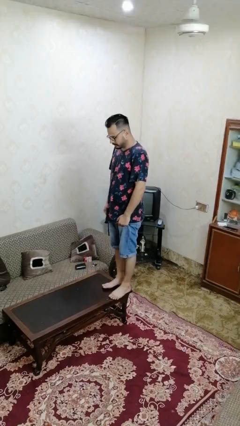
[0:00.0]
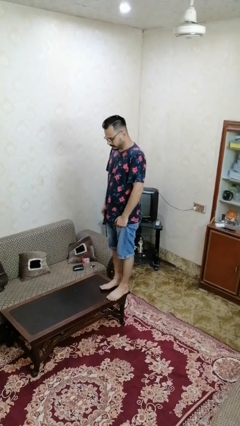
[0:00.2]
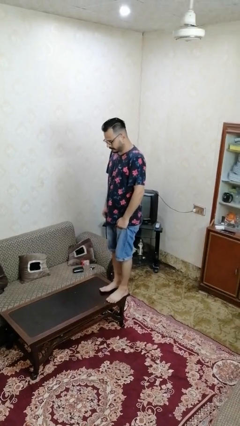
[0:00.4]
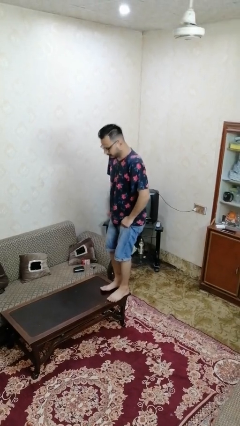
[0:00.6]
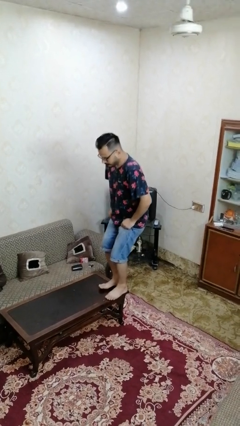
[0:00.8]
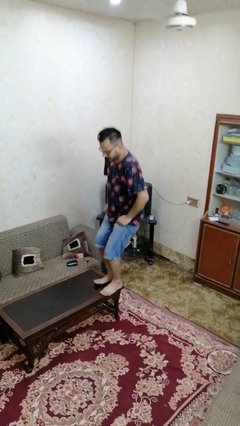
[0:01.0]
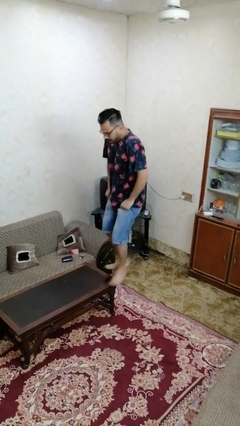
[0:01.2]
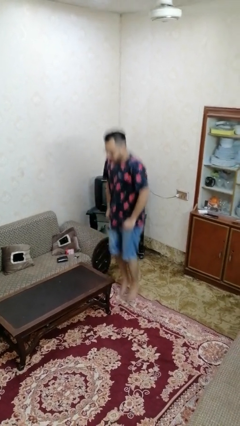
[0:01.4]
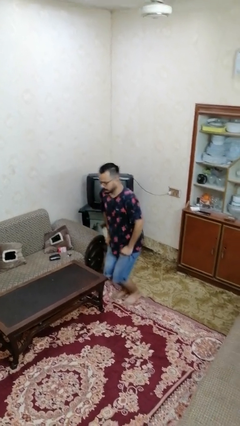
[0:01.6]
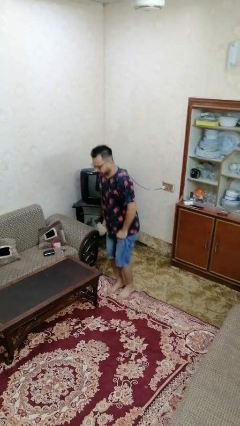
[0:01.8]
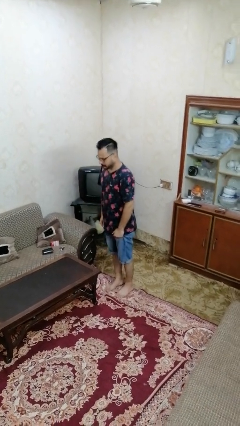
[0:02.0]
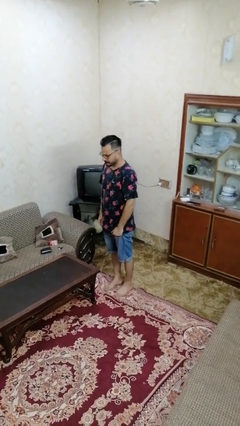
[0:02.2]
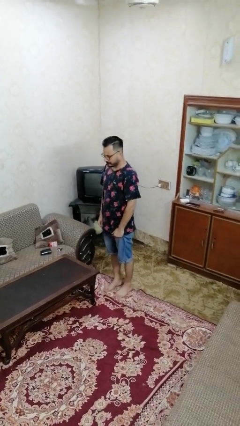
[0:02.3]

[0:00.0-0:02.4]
person climbs off table

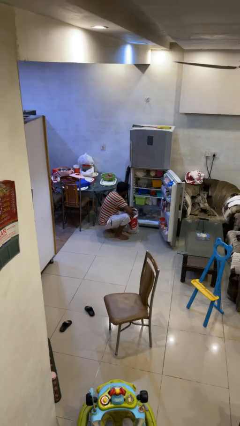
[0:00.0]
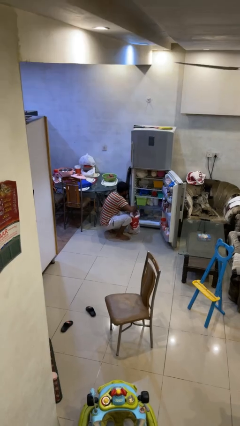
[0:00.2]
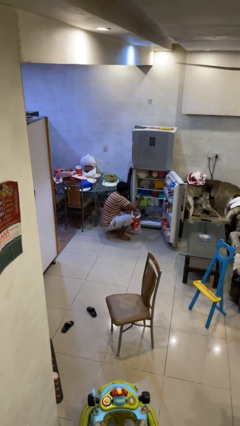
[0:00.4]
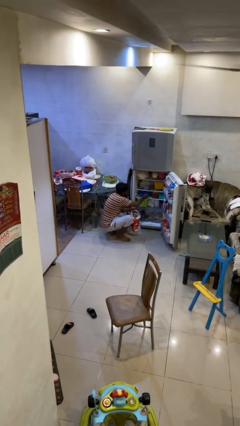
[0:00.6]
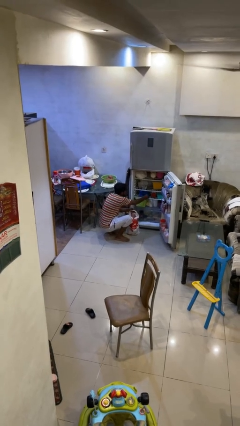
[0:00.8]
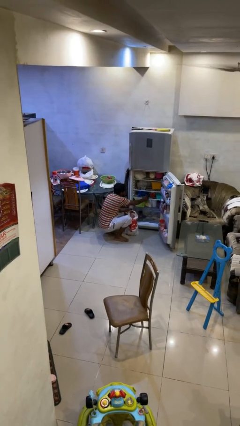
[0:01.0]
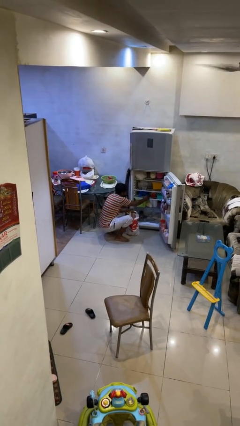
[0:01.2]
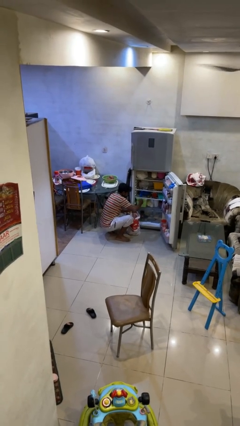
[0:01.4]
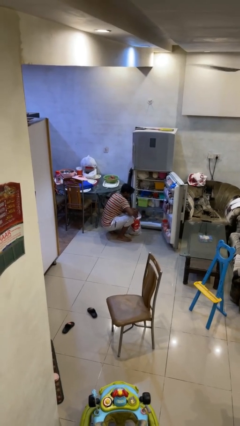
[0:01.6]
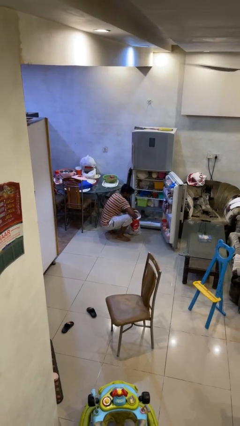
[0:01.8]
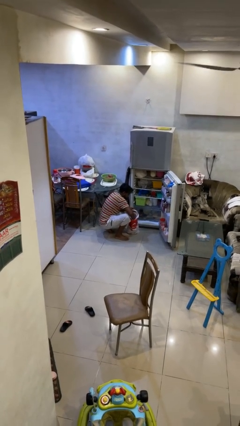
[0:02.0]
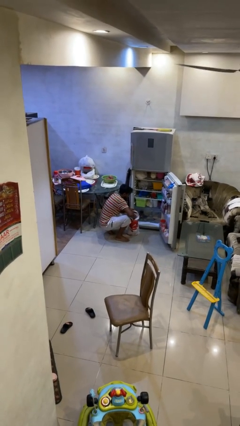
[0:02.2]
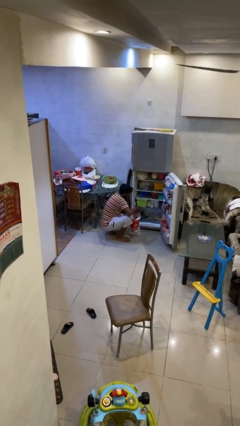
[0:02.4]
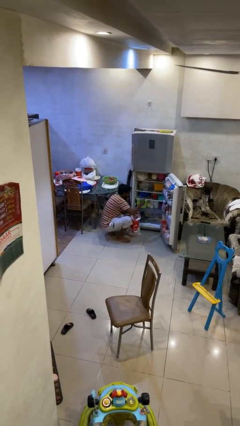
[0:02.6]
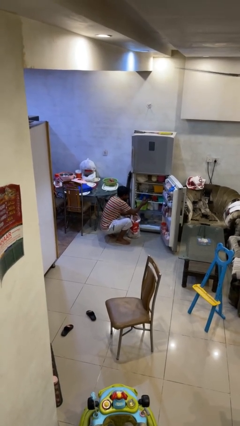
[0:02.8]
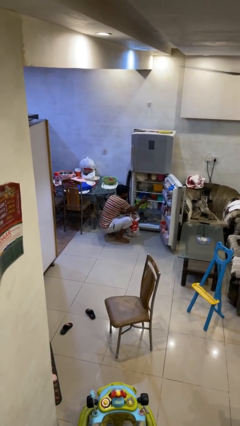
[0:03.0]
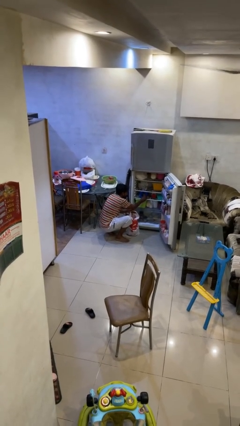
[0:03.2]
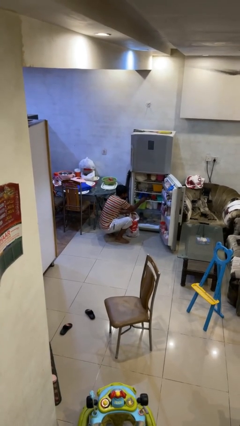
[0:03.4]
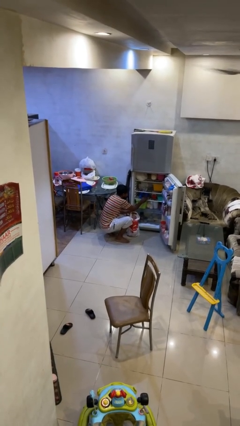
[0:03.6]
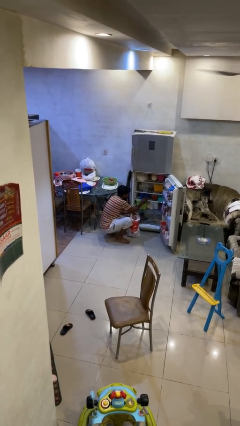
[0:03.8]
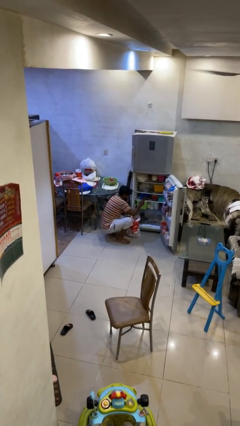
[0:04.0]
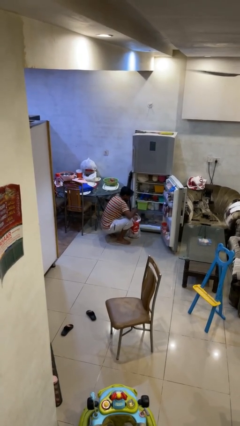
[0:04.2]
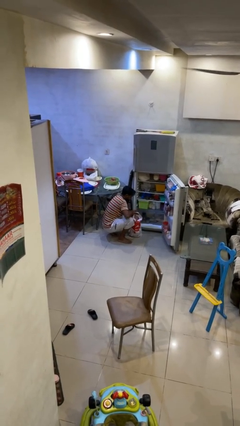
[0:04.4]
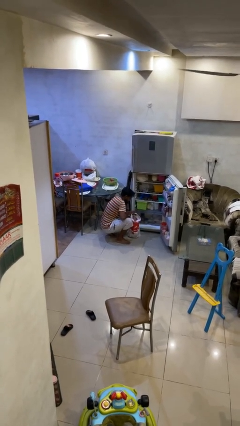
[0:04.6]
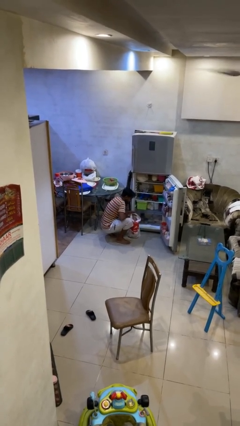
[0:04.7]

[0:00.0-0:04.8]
person loads groceries into refrigerator

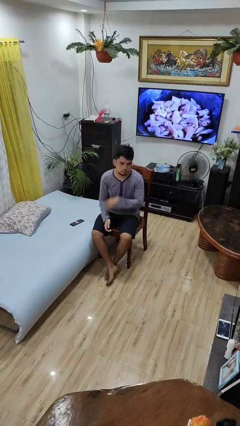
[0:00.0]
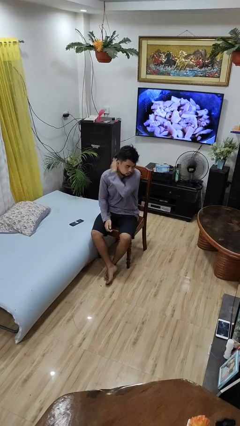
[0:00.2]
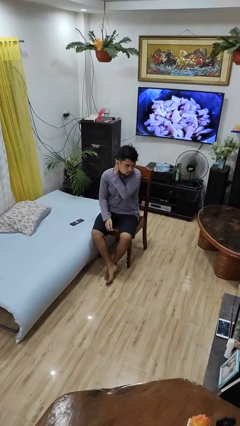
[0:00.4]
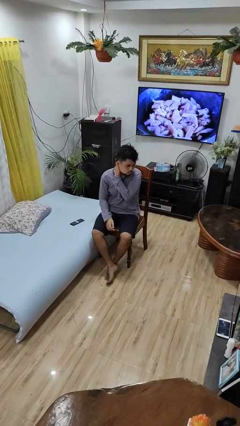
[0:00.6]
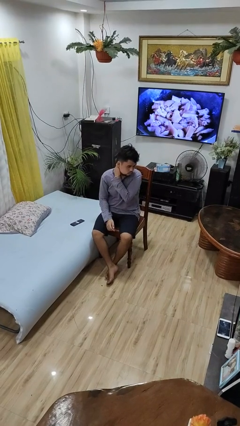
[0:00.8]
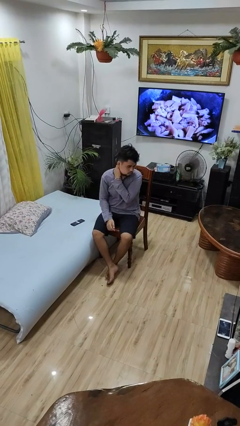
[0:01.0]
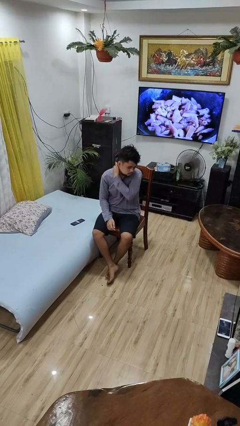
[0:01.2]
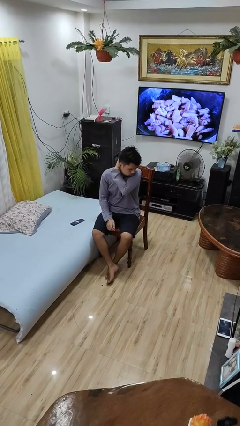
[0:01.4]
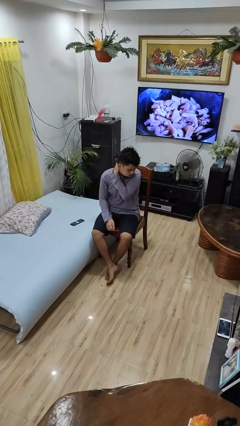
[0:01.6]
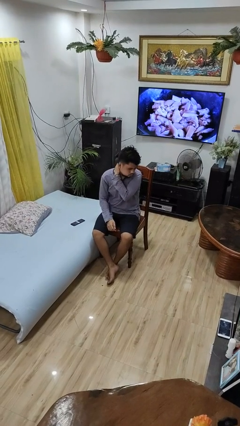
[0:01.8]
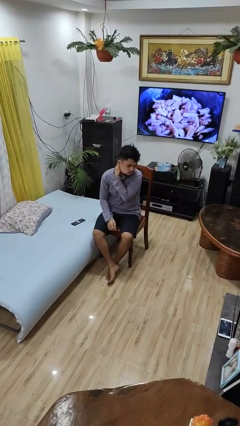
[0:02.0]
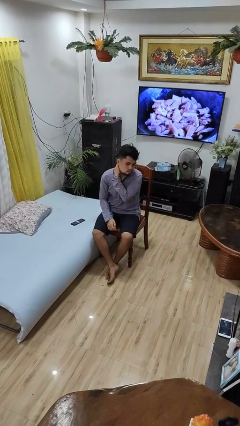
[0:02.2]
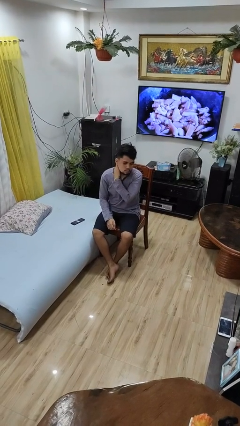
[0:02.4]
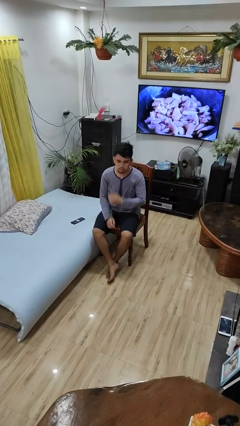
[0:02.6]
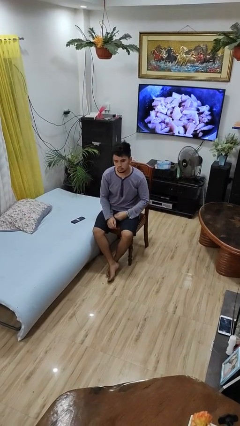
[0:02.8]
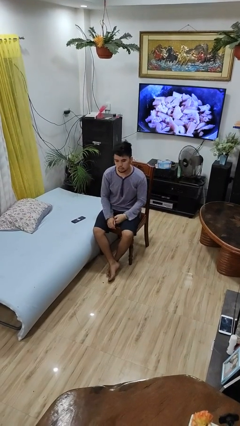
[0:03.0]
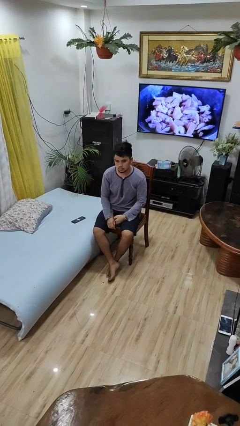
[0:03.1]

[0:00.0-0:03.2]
person rubs neck

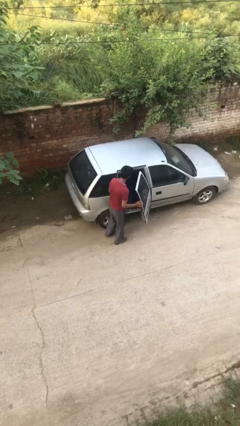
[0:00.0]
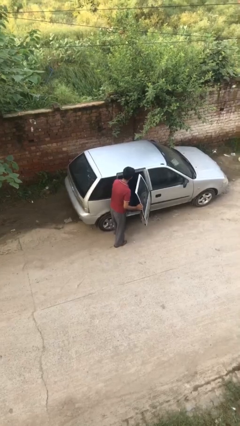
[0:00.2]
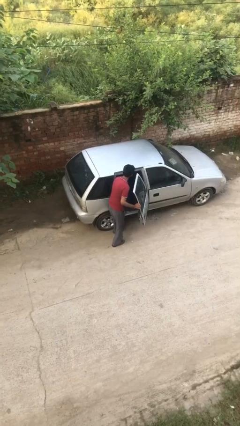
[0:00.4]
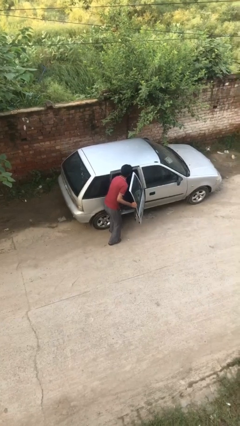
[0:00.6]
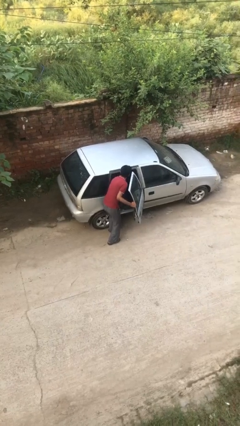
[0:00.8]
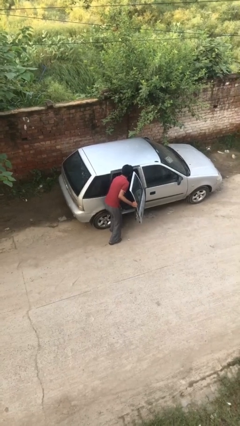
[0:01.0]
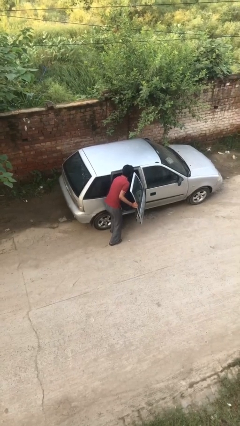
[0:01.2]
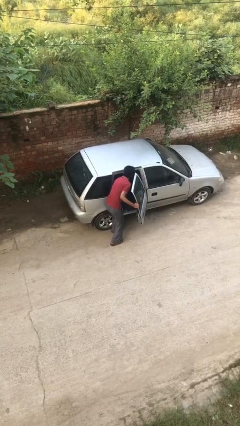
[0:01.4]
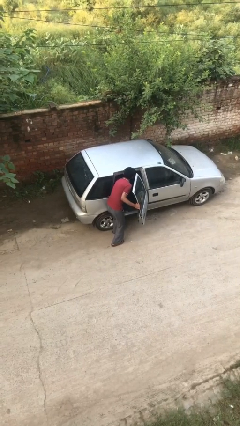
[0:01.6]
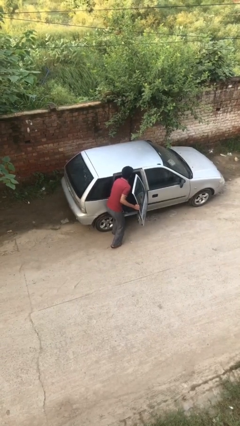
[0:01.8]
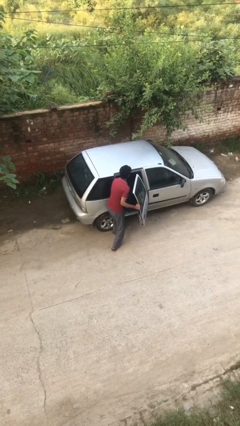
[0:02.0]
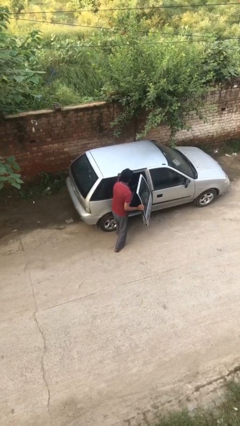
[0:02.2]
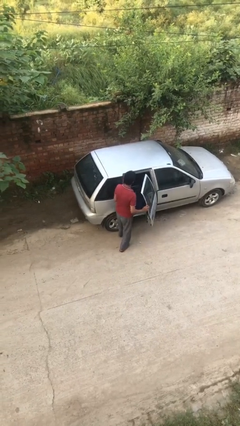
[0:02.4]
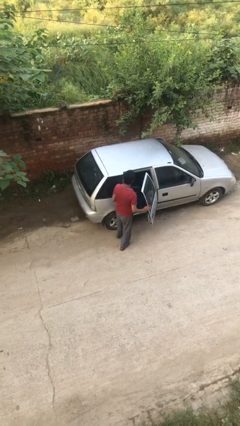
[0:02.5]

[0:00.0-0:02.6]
person unloads car

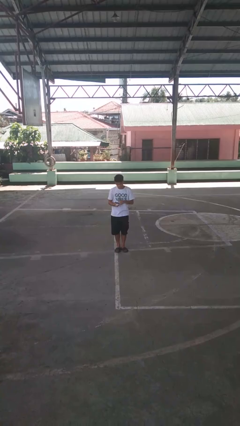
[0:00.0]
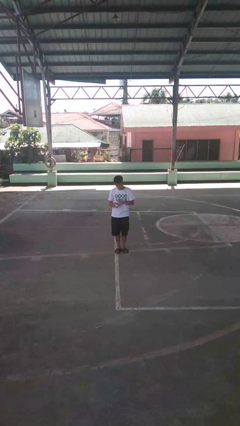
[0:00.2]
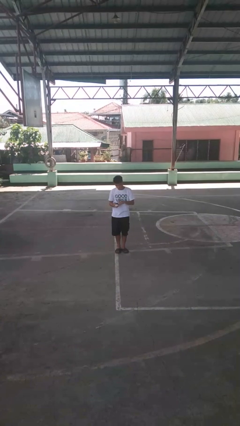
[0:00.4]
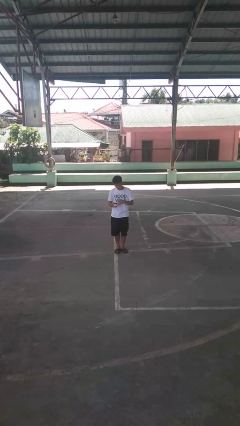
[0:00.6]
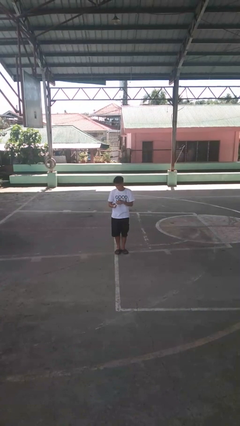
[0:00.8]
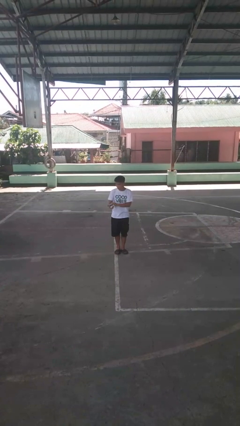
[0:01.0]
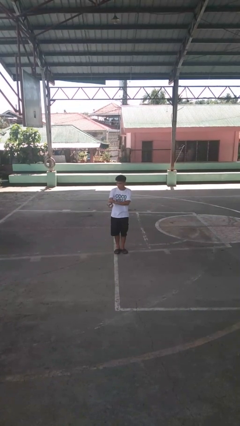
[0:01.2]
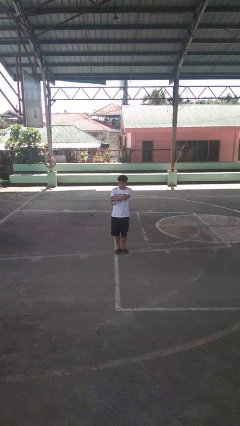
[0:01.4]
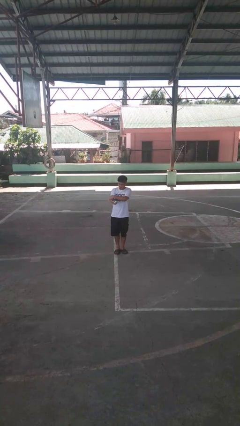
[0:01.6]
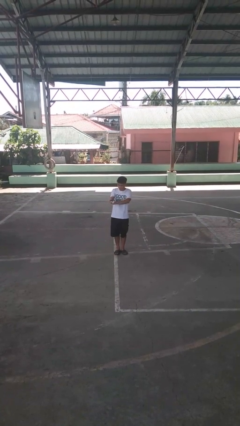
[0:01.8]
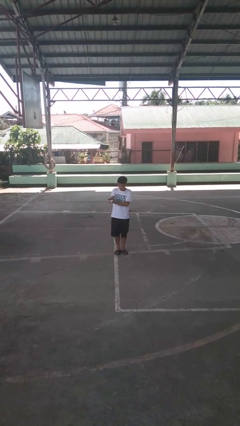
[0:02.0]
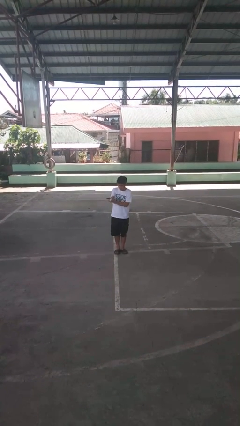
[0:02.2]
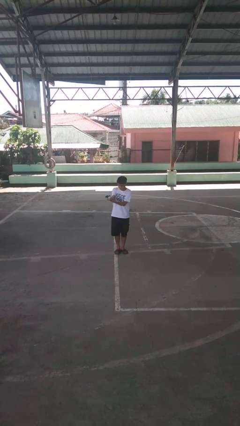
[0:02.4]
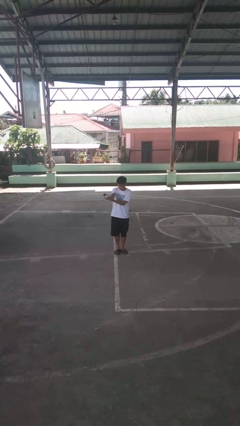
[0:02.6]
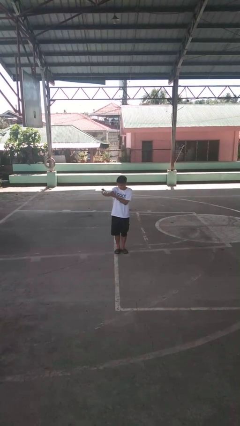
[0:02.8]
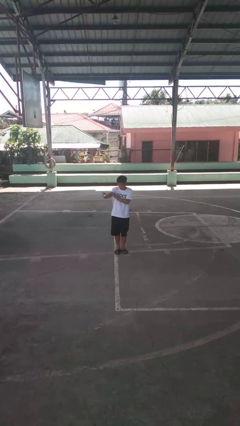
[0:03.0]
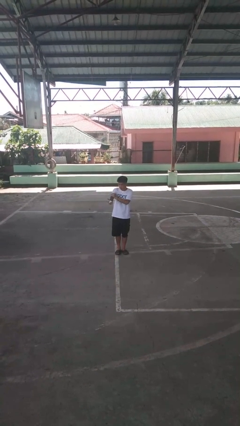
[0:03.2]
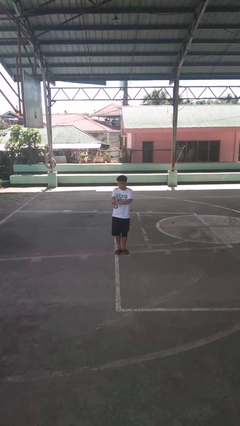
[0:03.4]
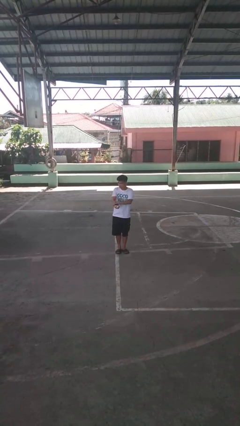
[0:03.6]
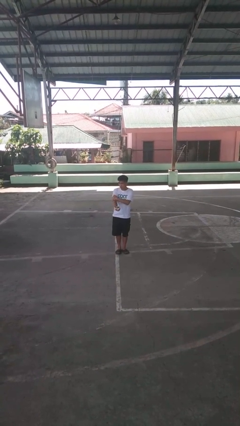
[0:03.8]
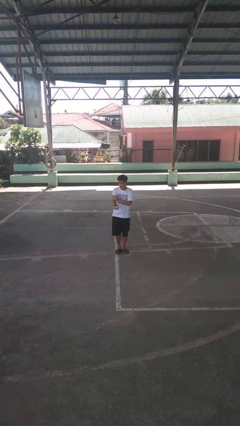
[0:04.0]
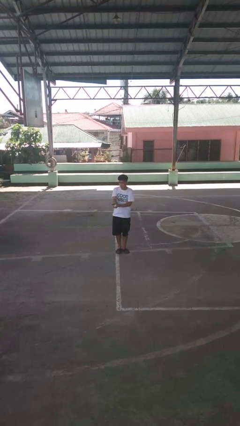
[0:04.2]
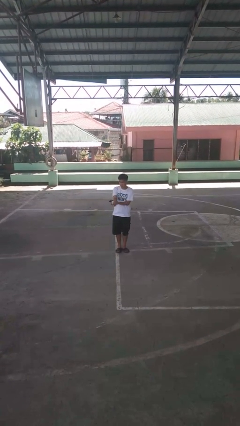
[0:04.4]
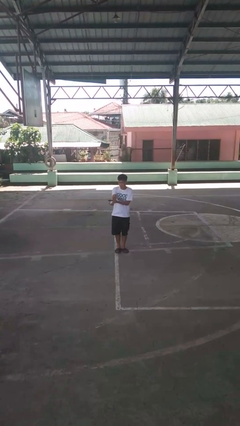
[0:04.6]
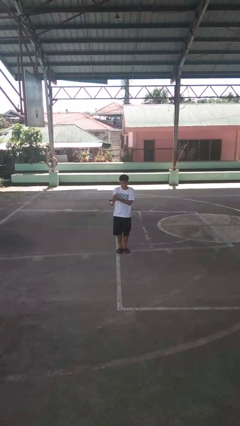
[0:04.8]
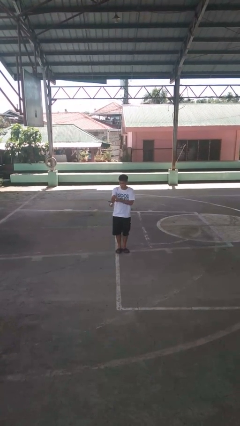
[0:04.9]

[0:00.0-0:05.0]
person applies sunscreen
